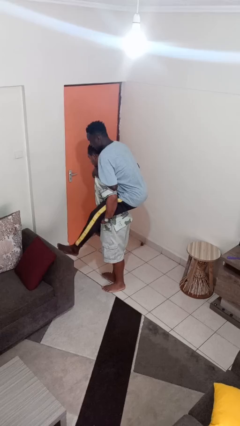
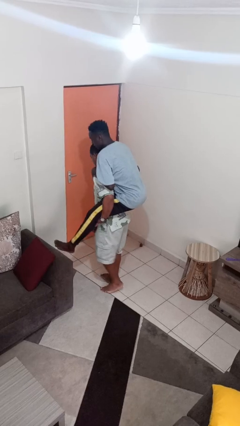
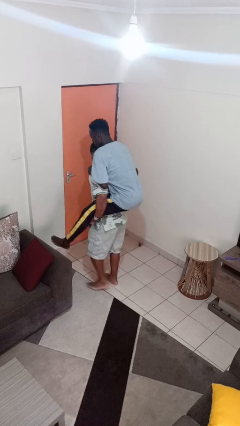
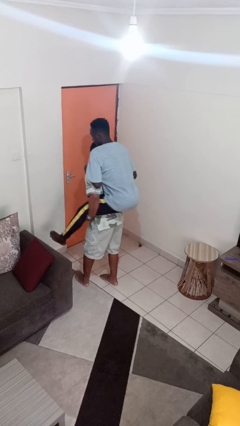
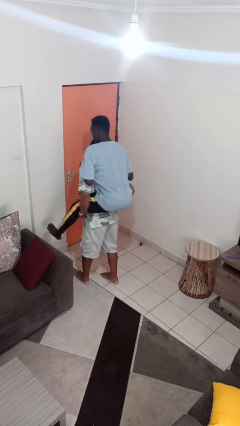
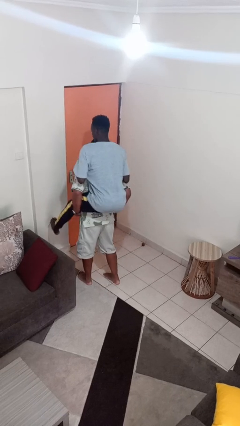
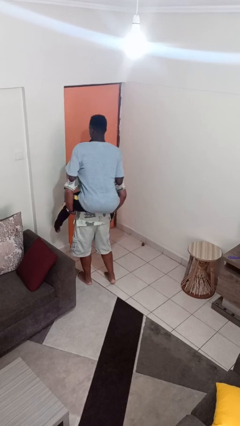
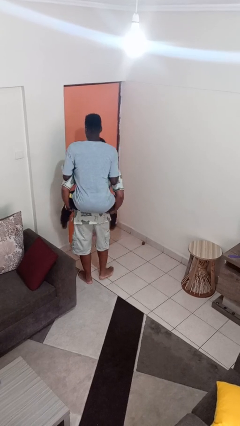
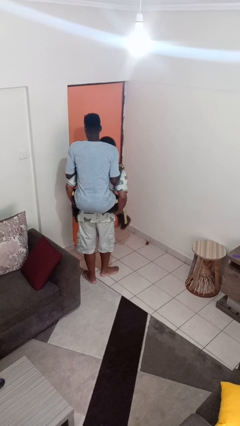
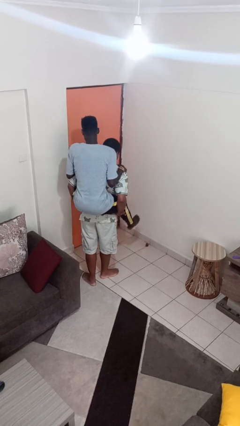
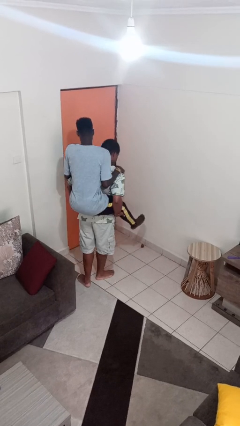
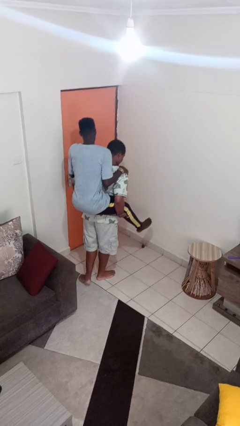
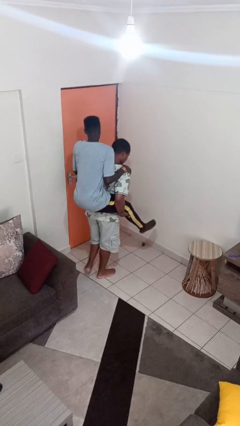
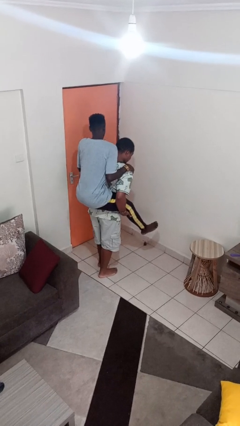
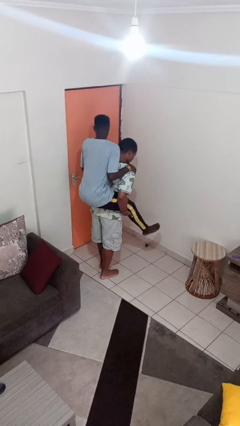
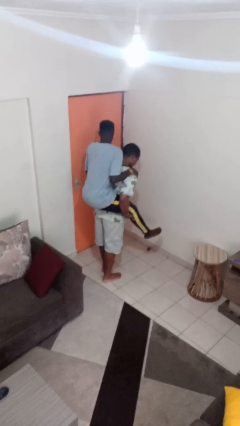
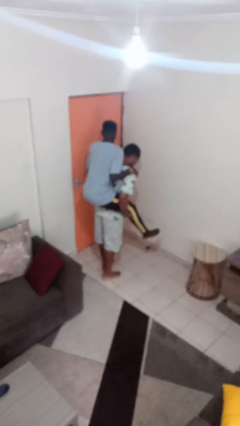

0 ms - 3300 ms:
person carries person on back

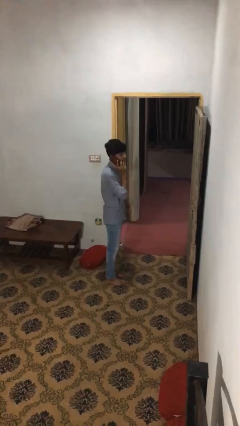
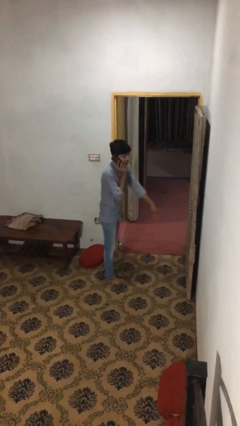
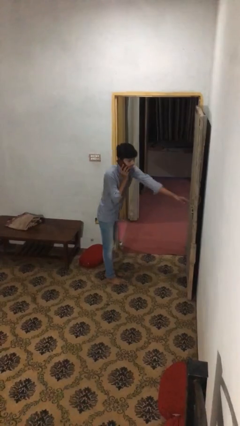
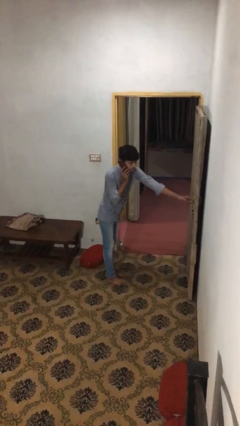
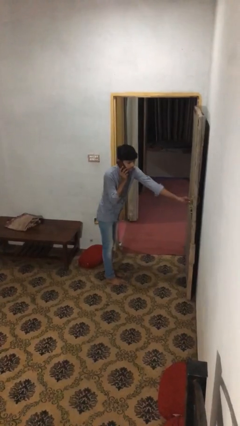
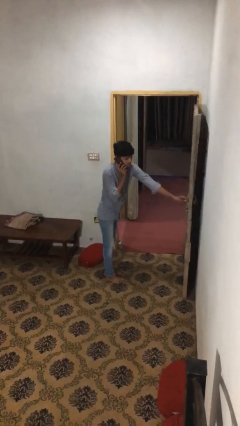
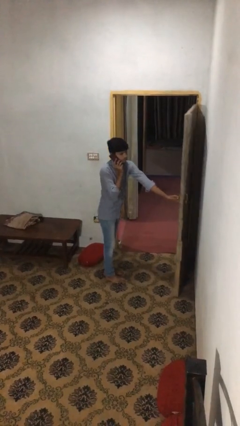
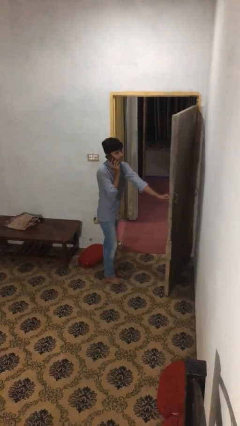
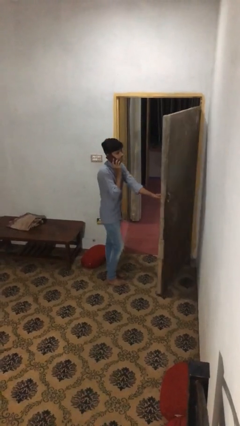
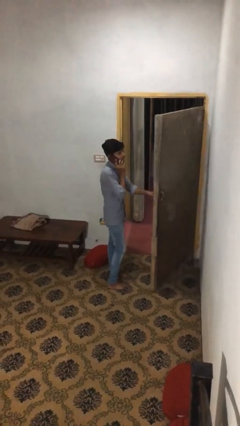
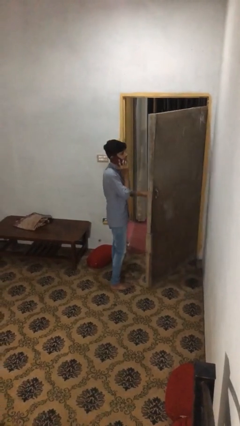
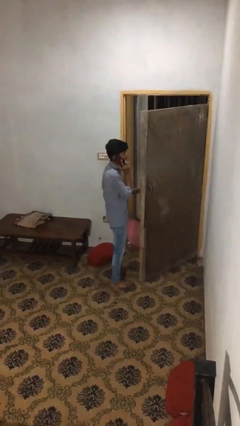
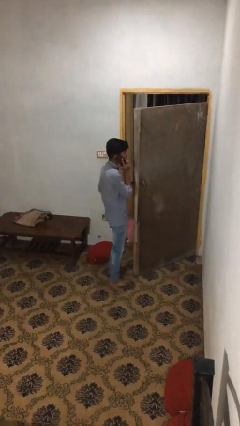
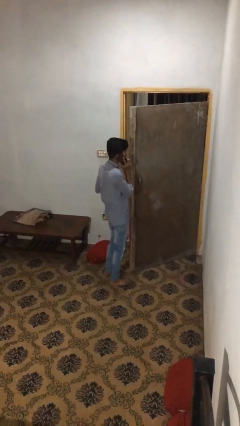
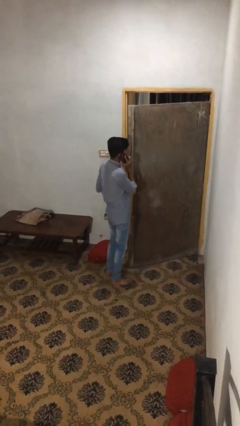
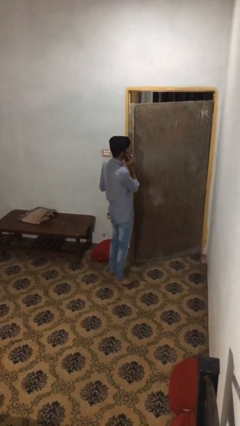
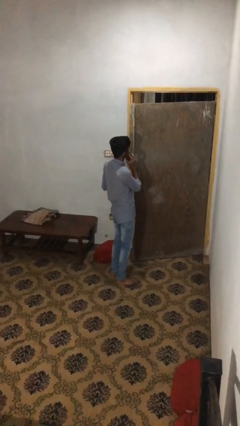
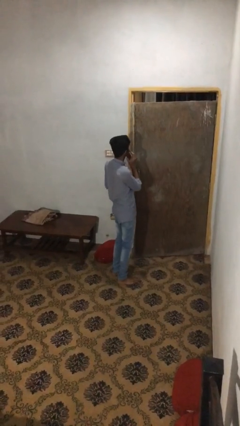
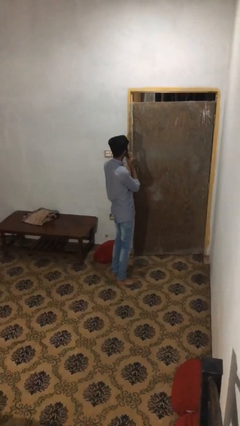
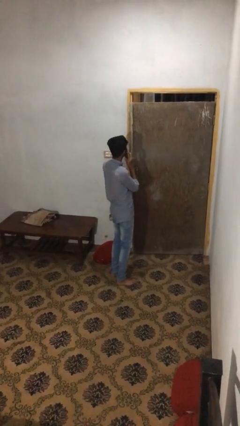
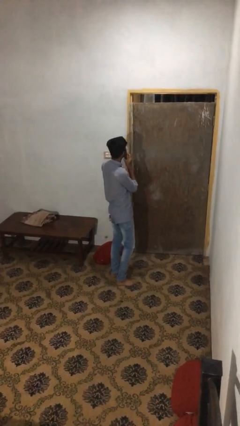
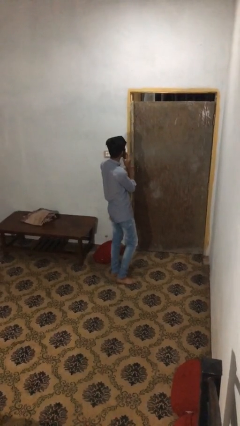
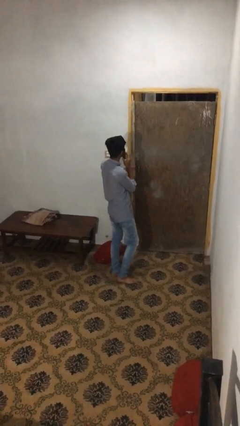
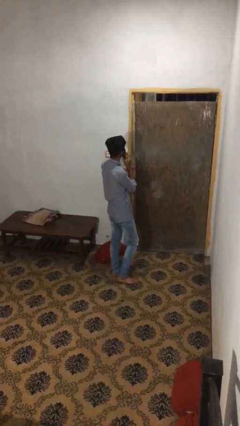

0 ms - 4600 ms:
person closes facility door

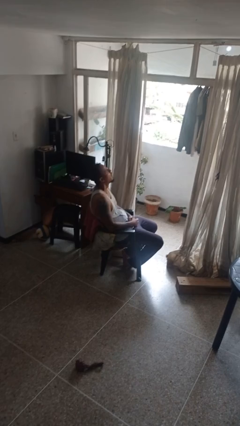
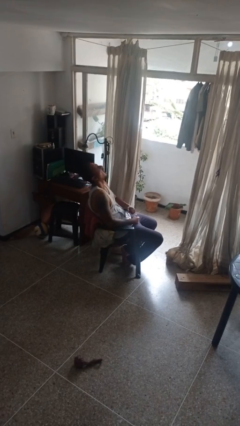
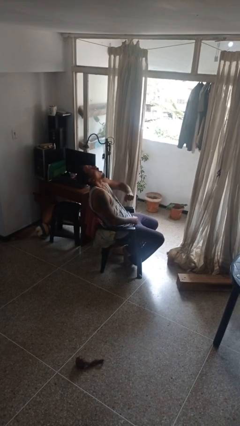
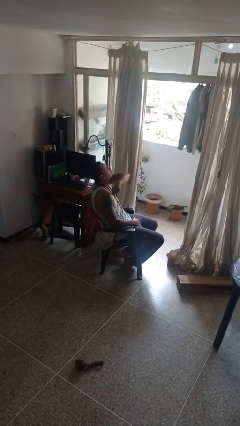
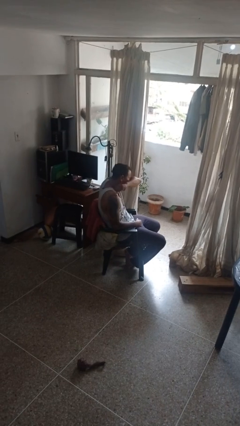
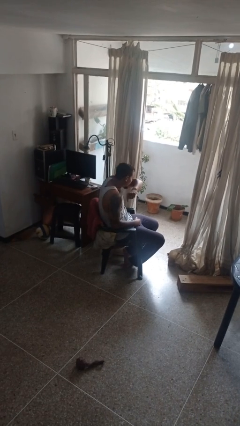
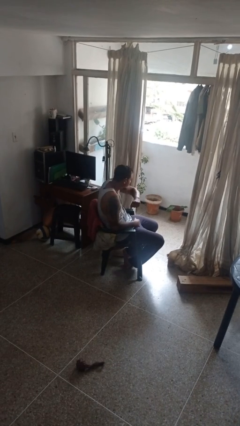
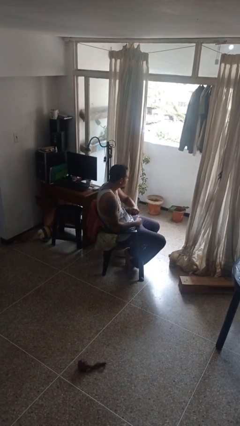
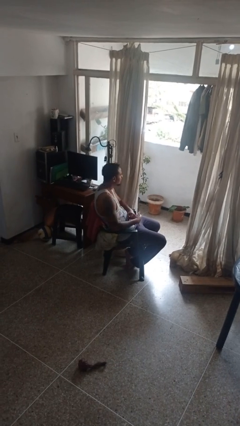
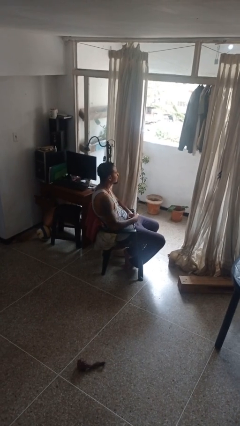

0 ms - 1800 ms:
person sneezes into arm

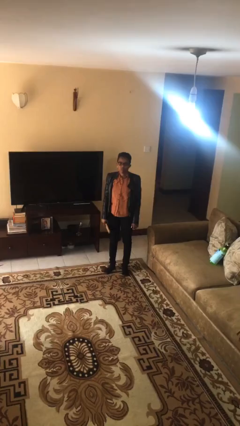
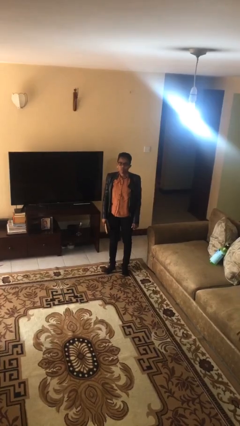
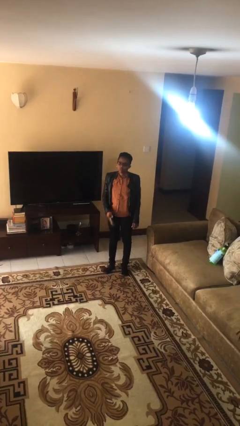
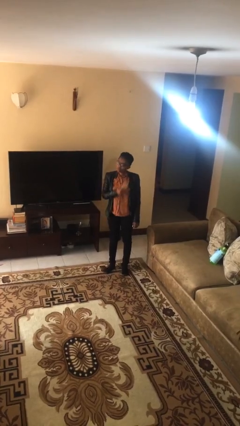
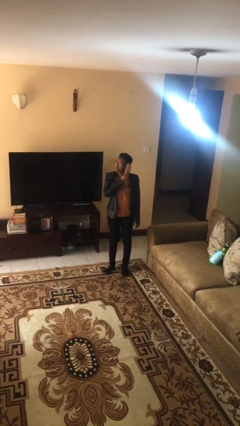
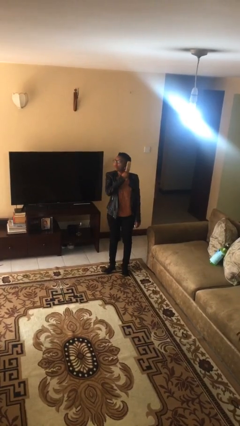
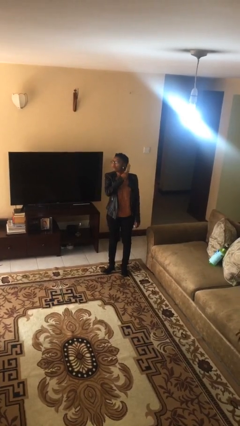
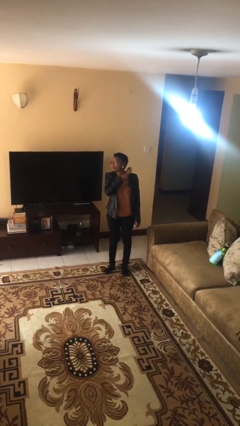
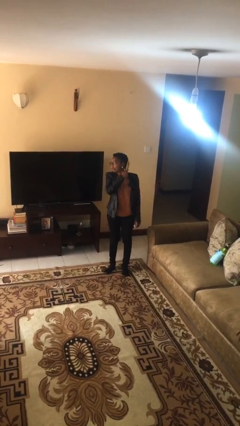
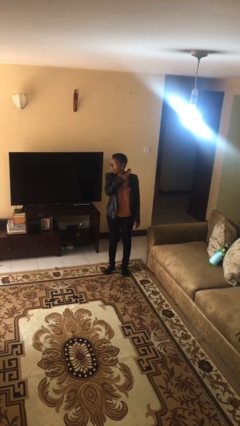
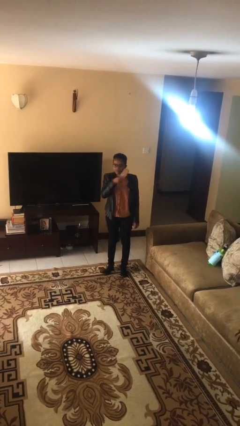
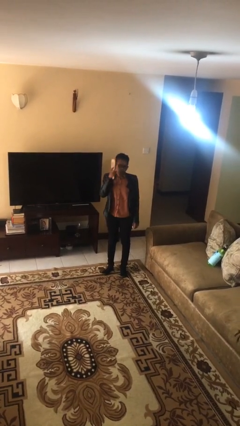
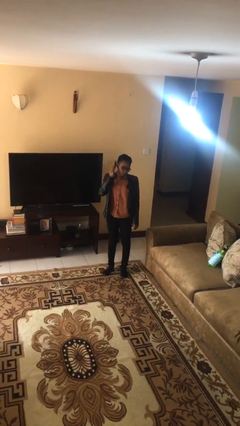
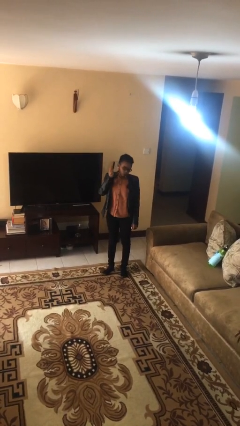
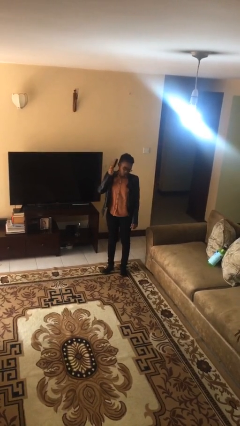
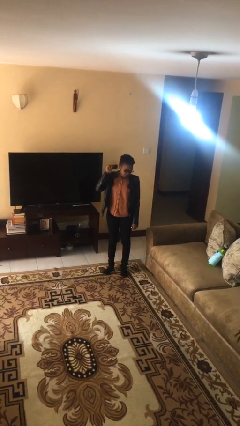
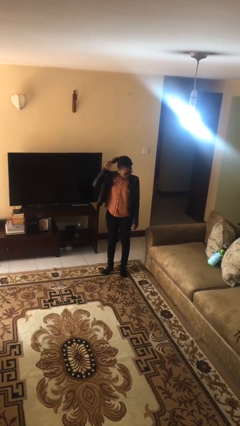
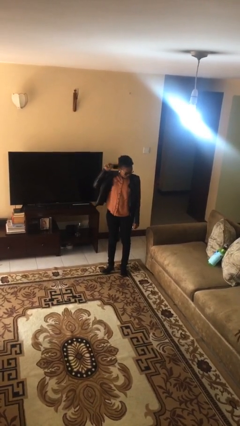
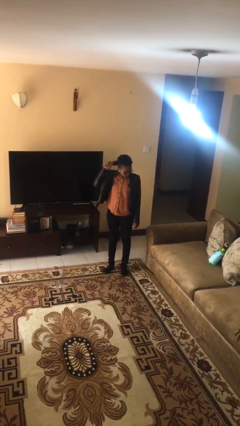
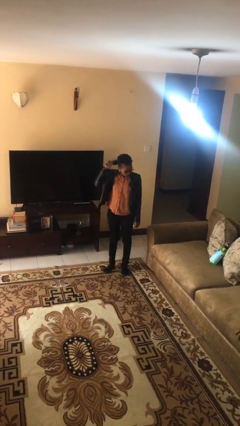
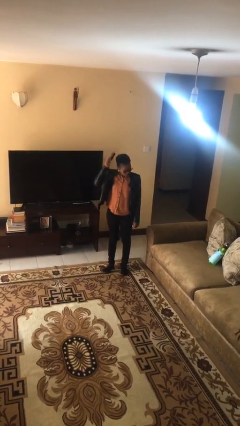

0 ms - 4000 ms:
person brushes hair

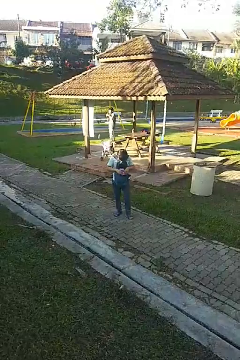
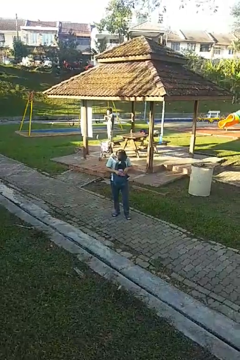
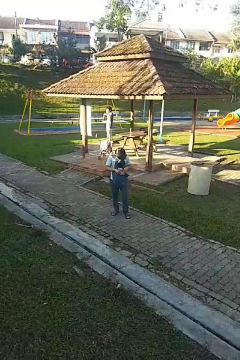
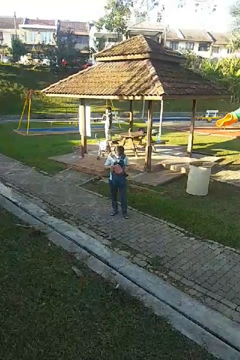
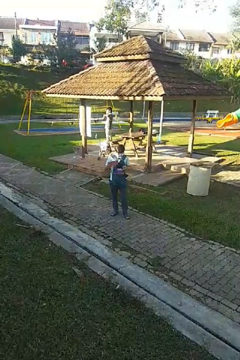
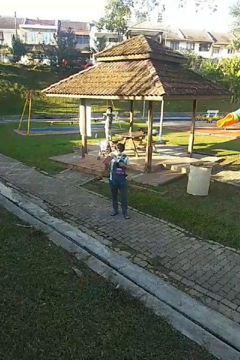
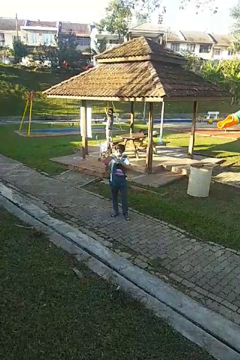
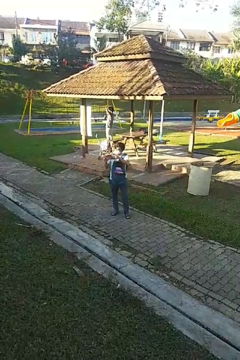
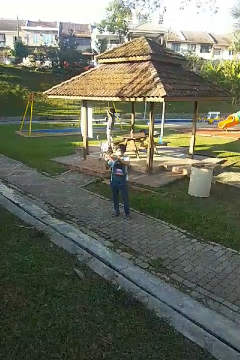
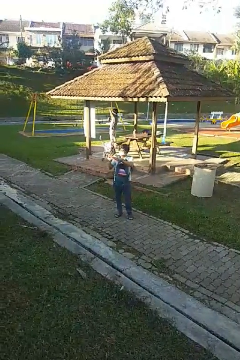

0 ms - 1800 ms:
person takes object from backpack

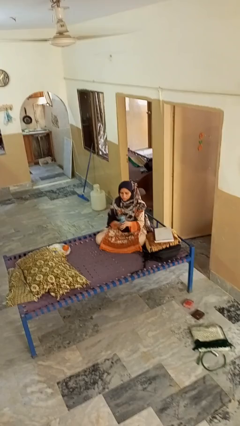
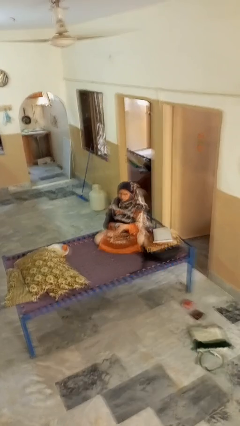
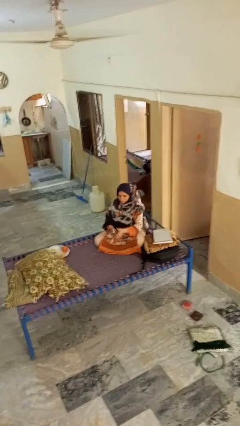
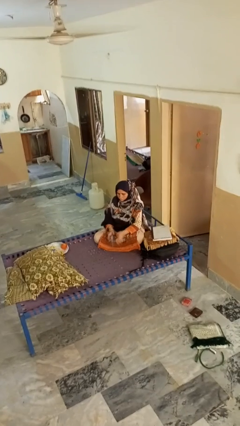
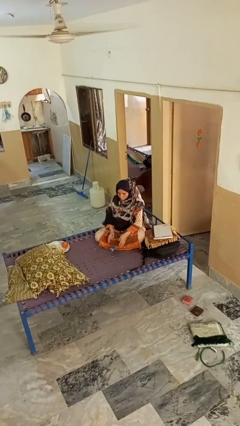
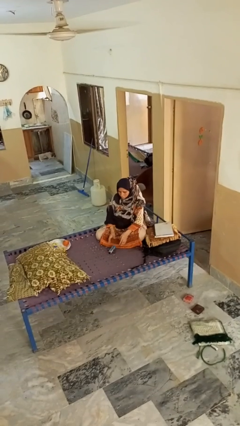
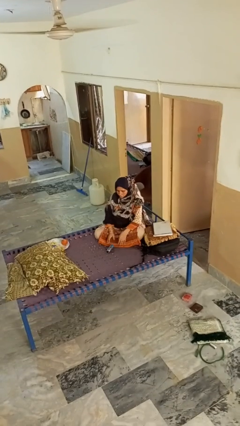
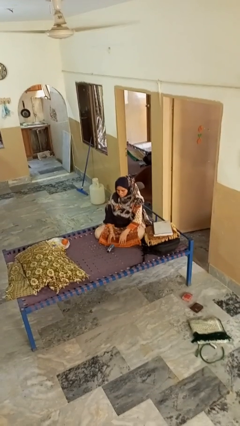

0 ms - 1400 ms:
person catches dropped object

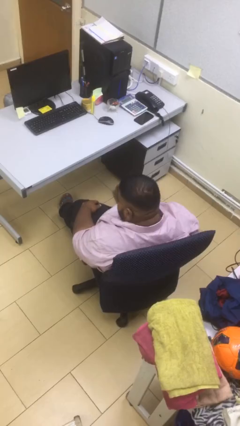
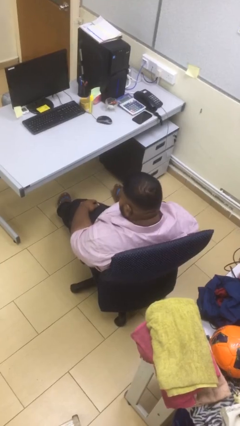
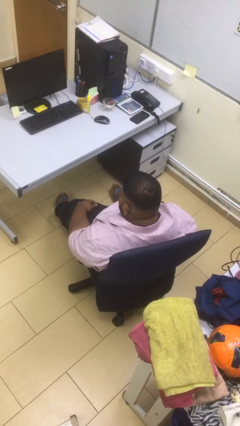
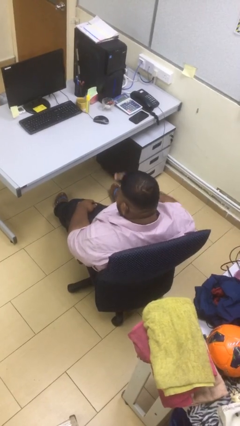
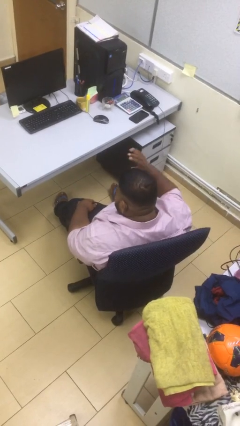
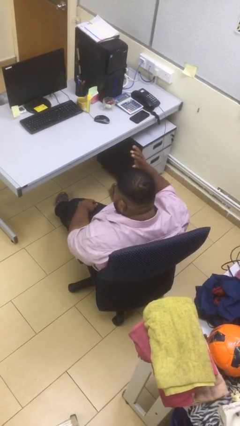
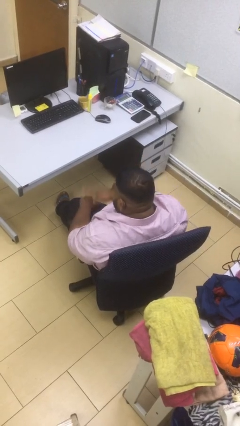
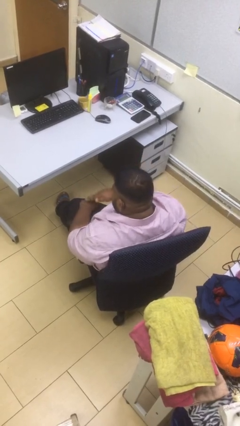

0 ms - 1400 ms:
person swats bug
